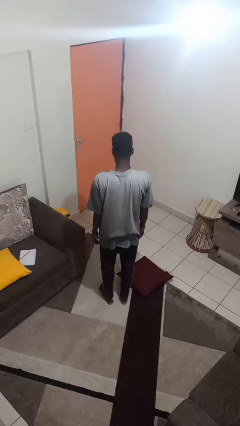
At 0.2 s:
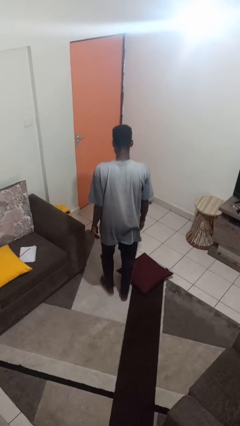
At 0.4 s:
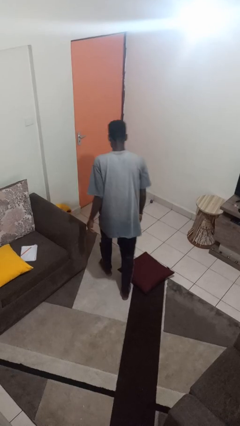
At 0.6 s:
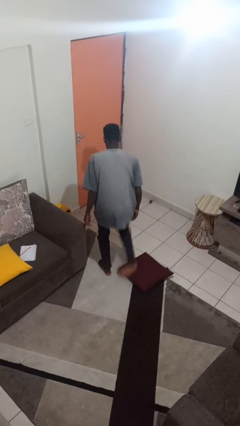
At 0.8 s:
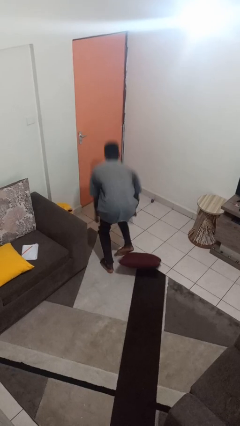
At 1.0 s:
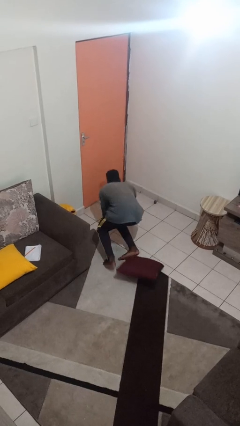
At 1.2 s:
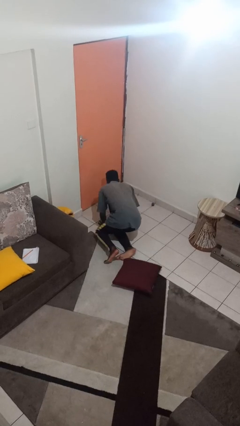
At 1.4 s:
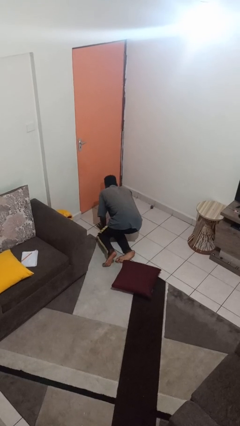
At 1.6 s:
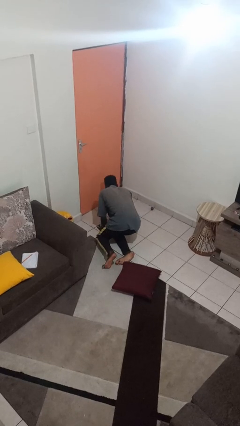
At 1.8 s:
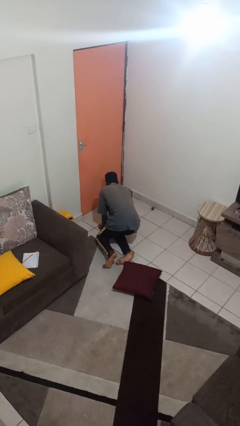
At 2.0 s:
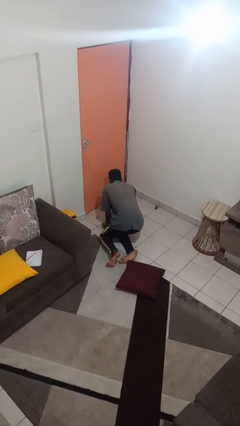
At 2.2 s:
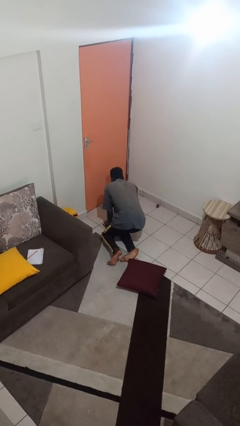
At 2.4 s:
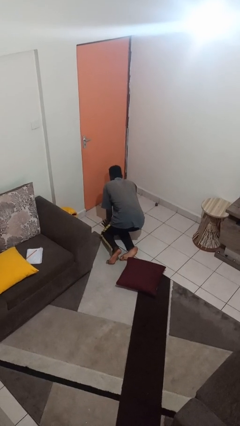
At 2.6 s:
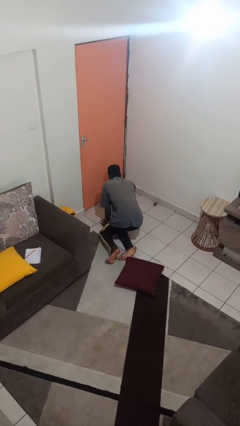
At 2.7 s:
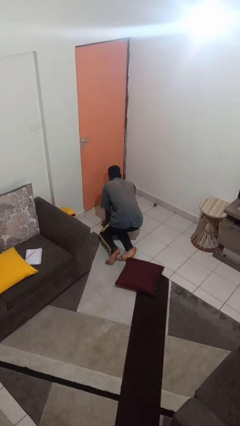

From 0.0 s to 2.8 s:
person trips on object on floor

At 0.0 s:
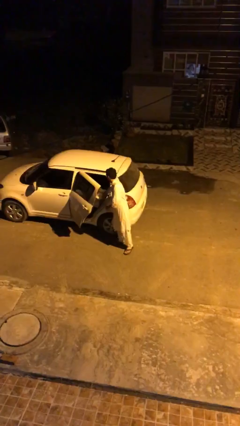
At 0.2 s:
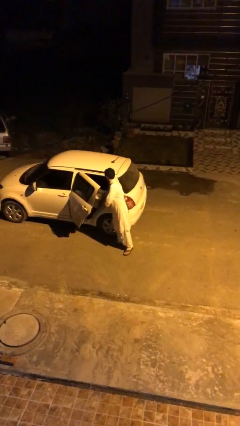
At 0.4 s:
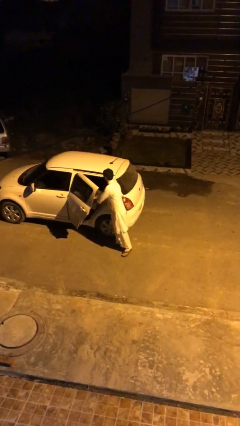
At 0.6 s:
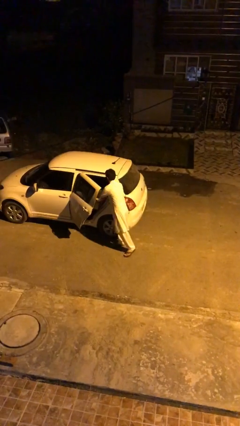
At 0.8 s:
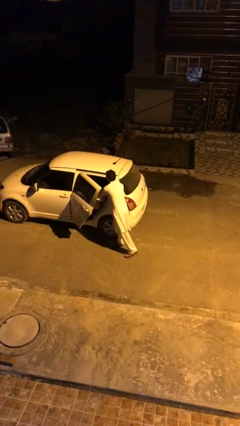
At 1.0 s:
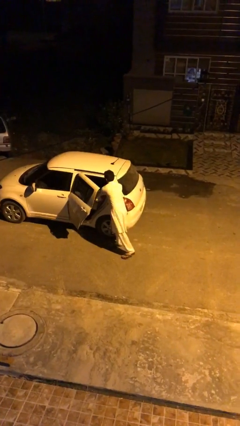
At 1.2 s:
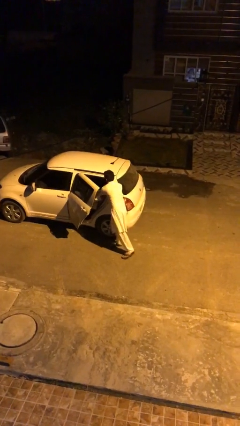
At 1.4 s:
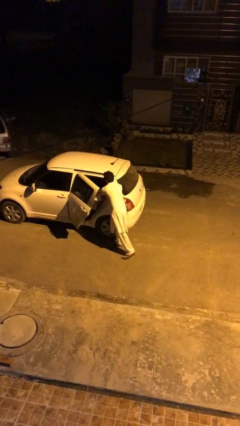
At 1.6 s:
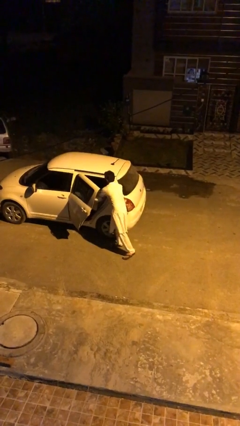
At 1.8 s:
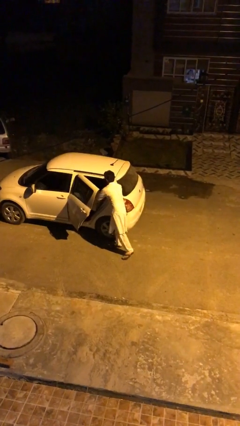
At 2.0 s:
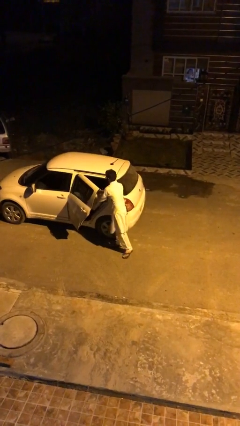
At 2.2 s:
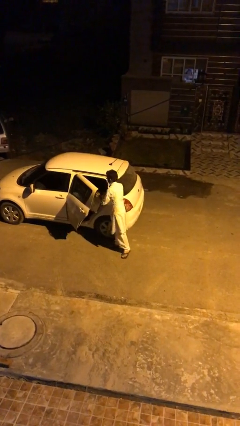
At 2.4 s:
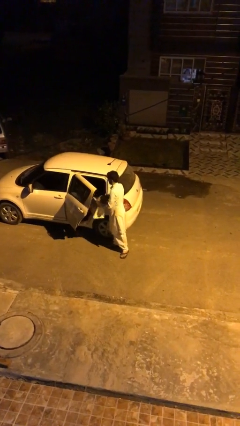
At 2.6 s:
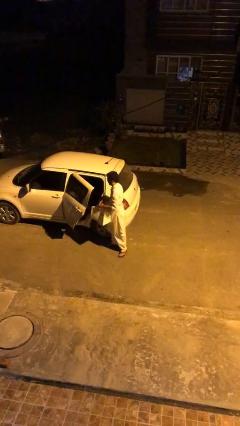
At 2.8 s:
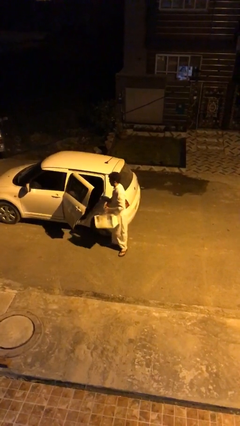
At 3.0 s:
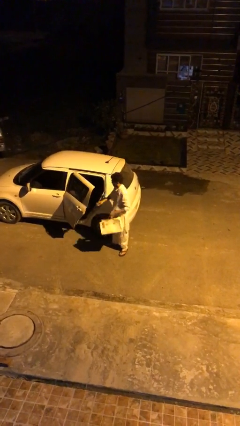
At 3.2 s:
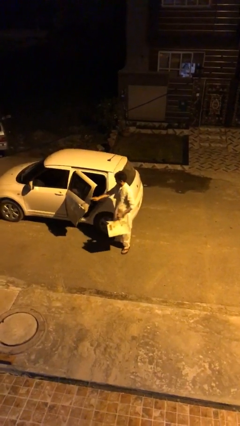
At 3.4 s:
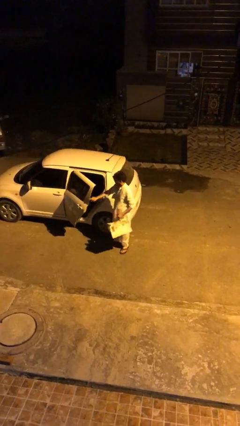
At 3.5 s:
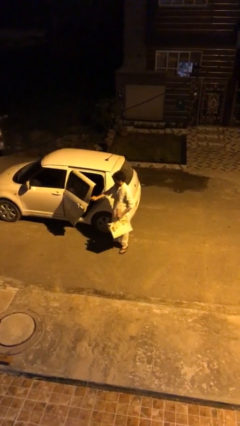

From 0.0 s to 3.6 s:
person unloads car

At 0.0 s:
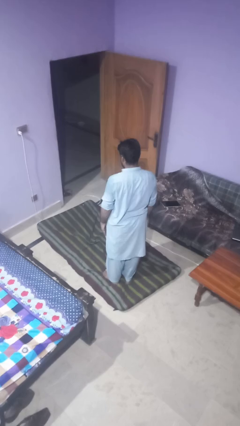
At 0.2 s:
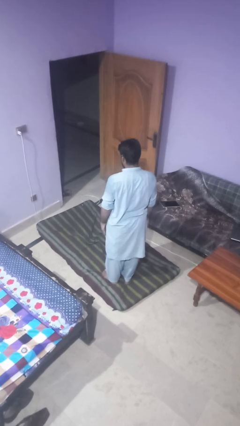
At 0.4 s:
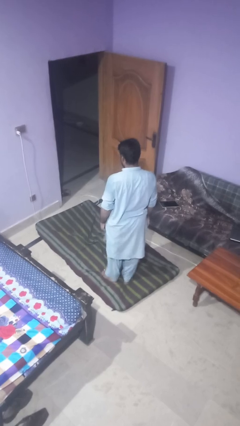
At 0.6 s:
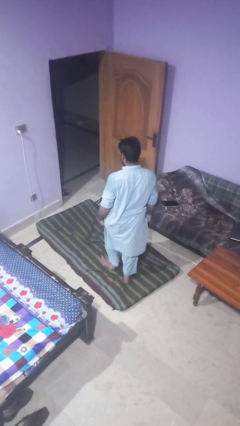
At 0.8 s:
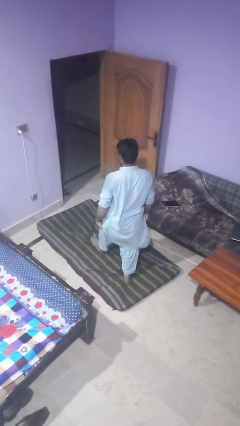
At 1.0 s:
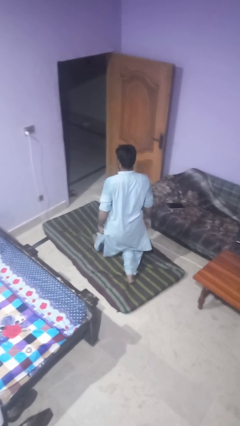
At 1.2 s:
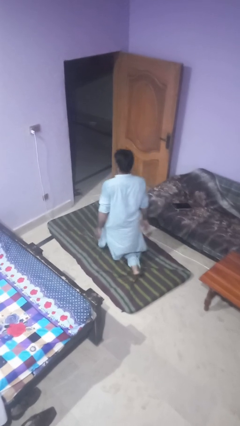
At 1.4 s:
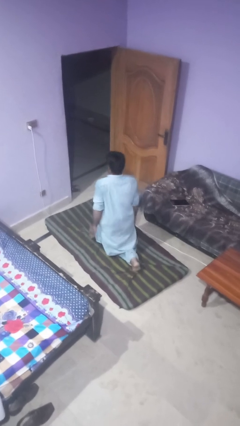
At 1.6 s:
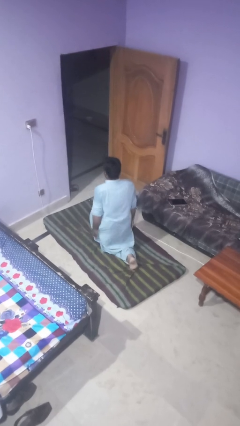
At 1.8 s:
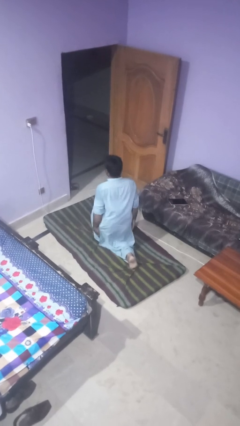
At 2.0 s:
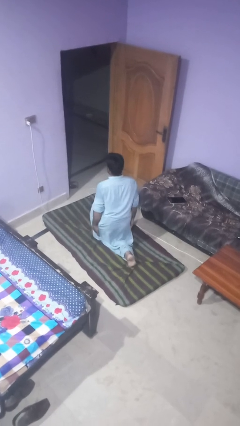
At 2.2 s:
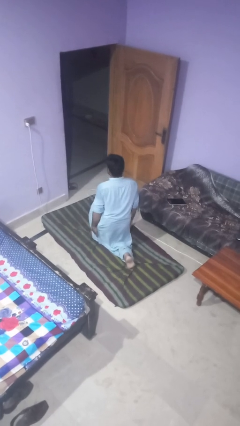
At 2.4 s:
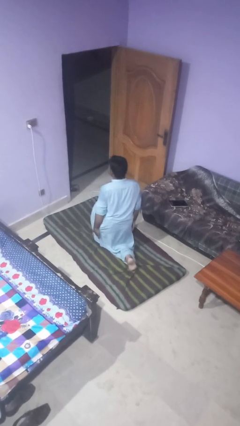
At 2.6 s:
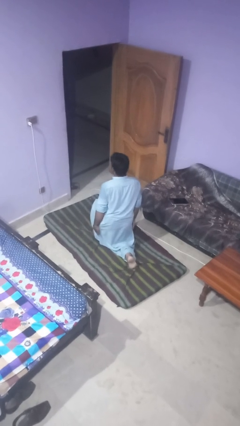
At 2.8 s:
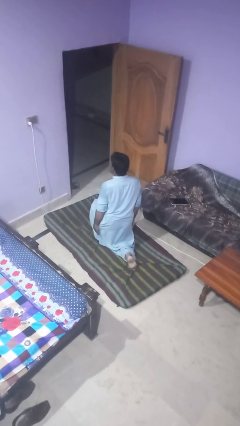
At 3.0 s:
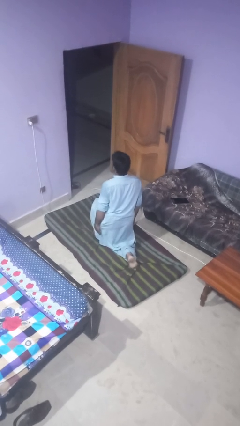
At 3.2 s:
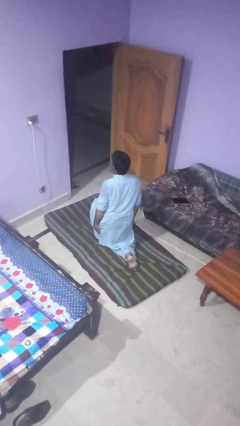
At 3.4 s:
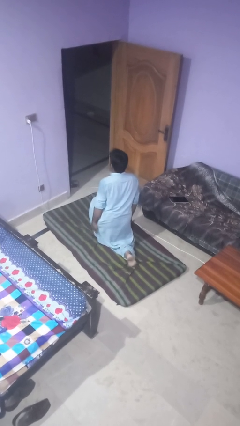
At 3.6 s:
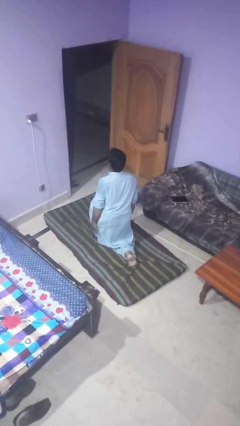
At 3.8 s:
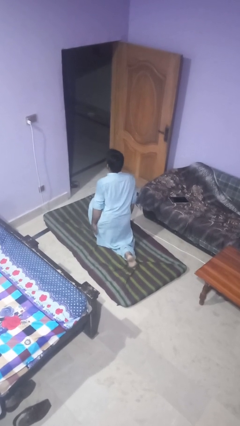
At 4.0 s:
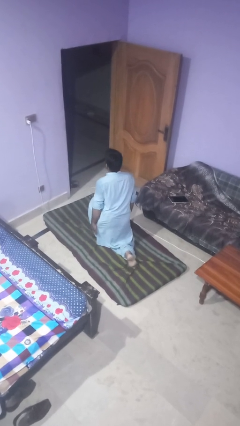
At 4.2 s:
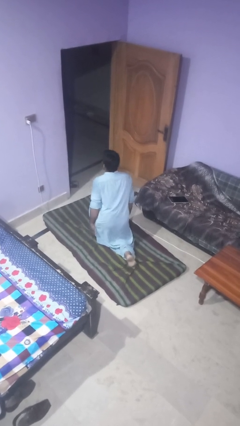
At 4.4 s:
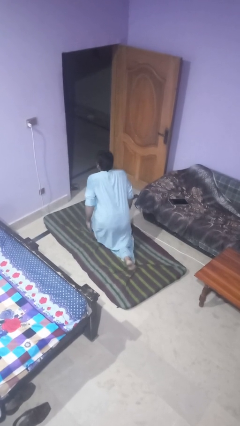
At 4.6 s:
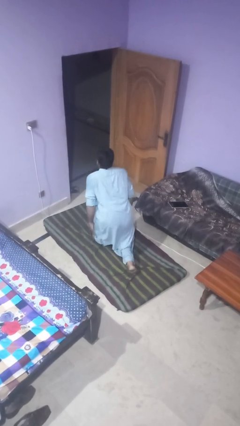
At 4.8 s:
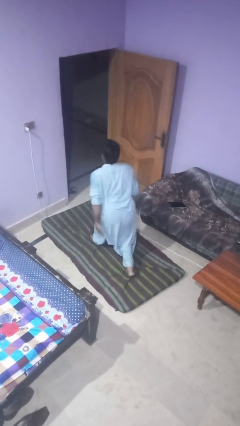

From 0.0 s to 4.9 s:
person exercises with lunges

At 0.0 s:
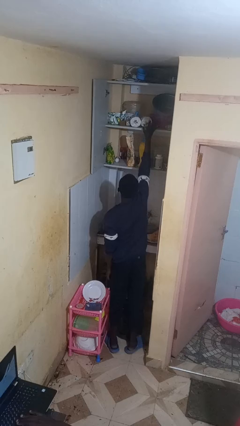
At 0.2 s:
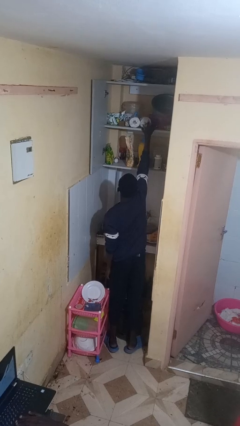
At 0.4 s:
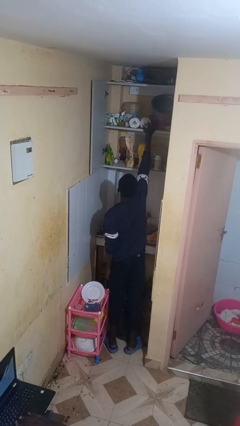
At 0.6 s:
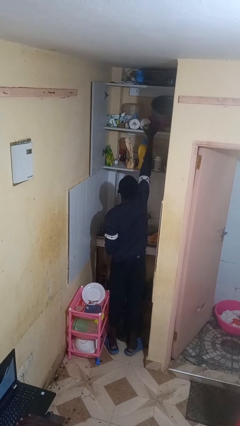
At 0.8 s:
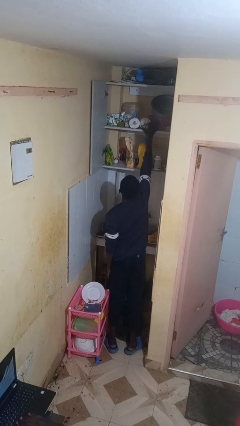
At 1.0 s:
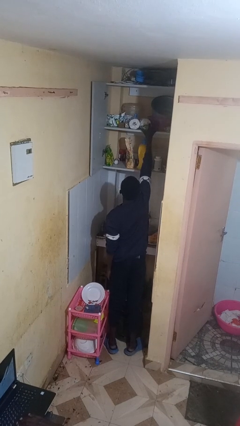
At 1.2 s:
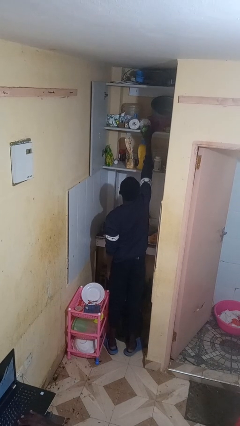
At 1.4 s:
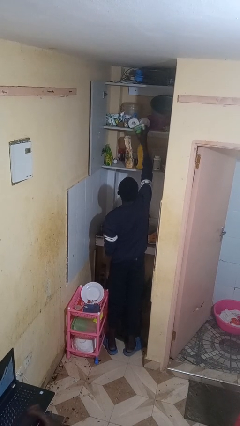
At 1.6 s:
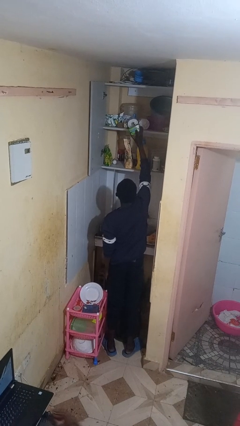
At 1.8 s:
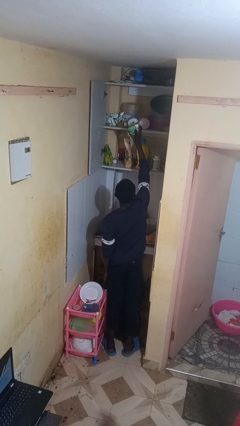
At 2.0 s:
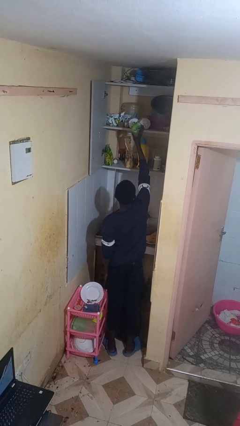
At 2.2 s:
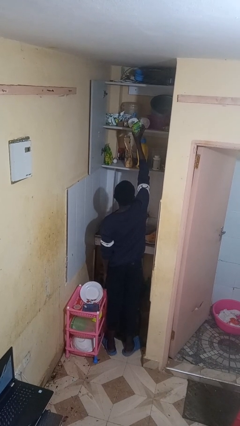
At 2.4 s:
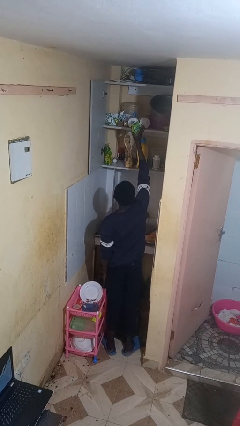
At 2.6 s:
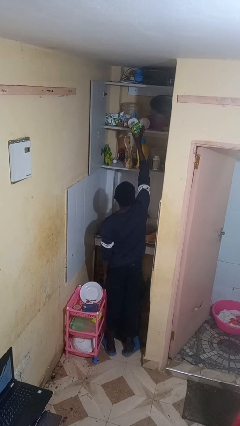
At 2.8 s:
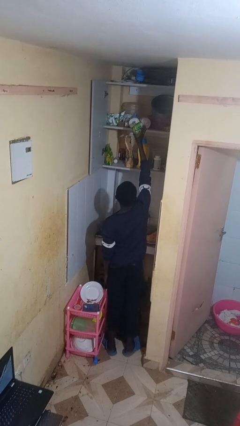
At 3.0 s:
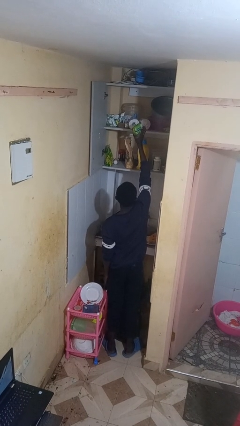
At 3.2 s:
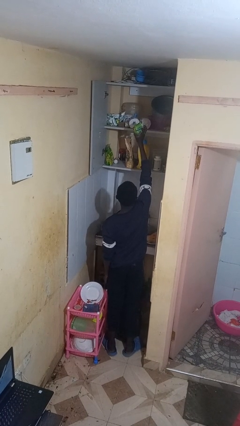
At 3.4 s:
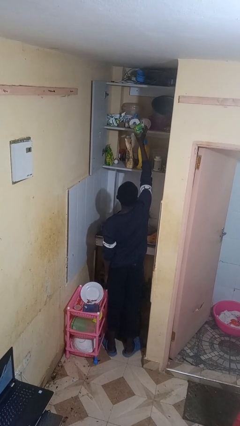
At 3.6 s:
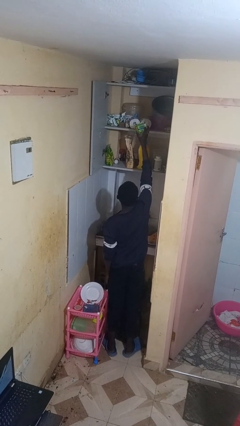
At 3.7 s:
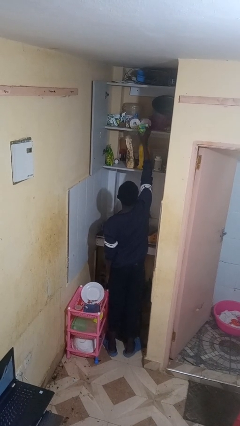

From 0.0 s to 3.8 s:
person takes object from cabinet

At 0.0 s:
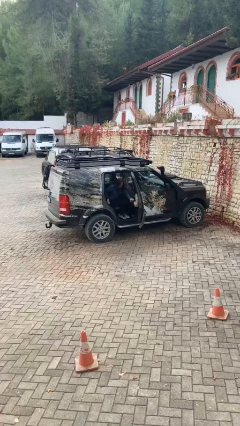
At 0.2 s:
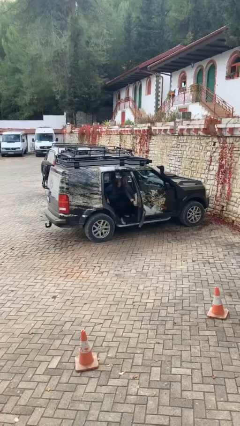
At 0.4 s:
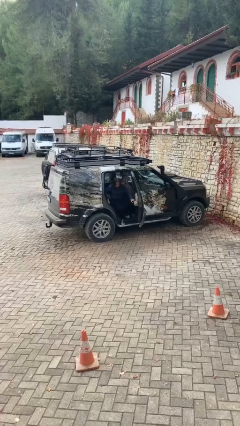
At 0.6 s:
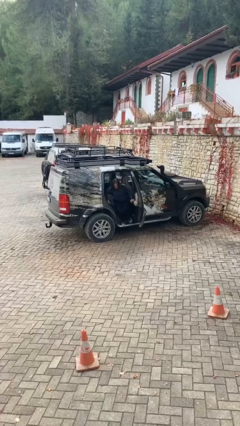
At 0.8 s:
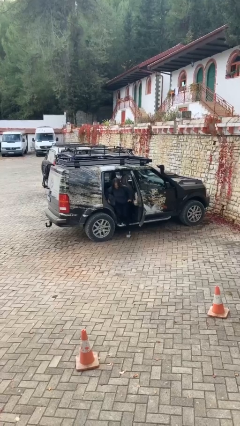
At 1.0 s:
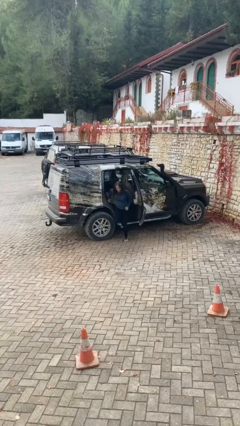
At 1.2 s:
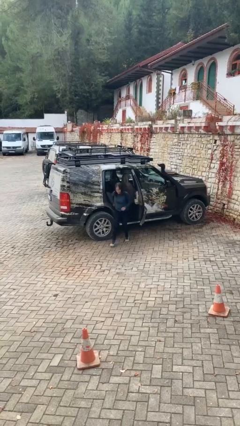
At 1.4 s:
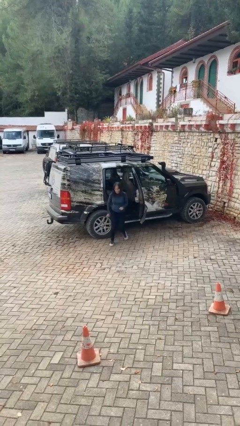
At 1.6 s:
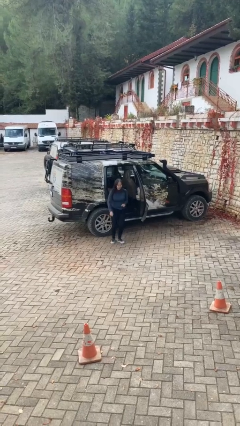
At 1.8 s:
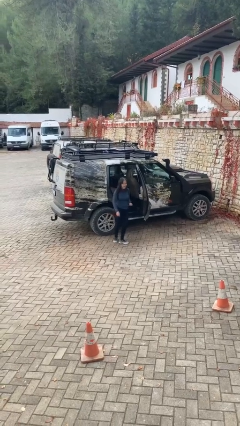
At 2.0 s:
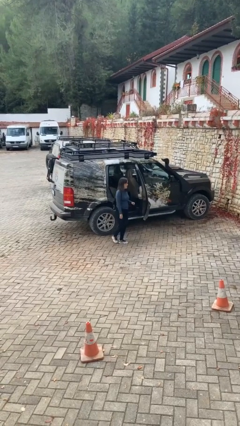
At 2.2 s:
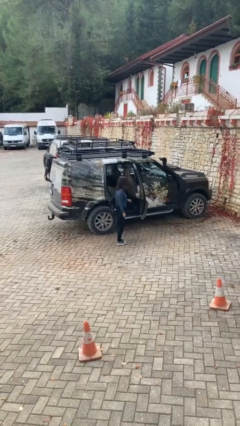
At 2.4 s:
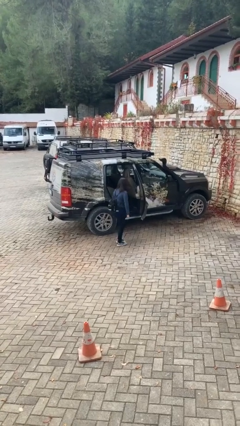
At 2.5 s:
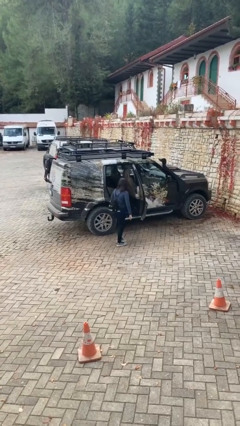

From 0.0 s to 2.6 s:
person exits car
